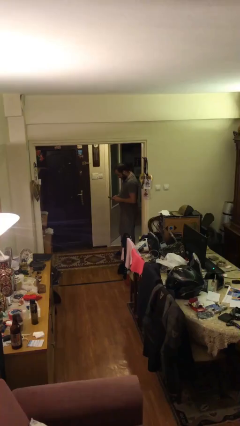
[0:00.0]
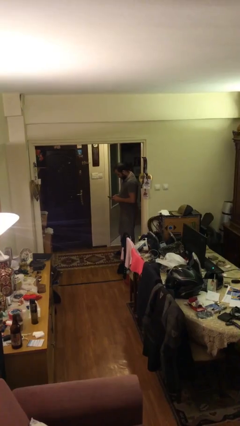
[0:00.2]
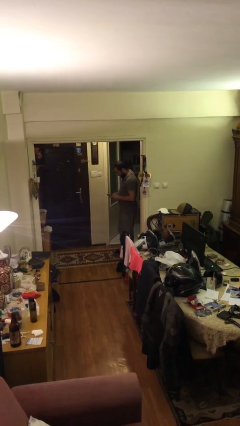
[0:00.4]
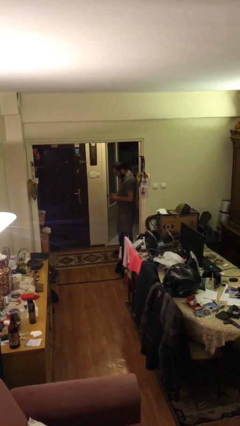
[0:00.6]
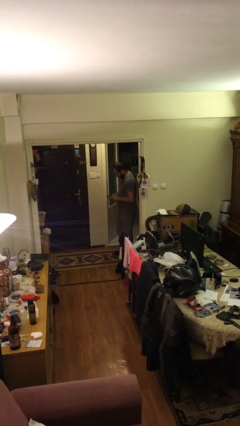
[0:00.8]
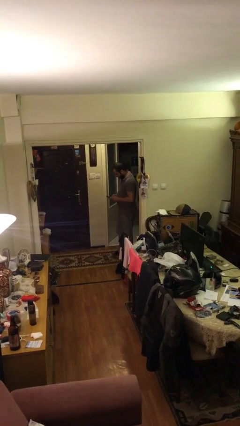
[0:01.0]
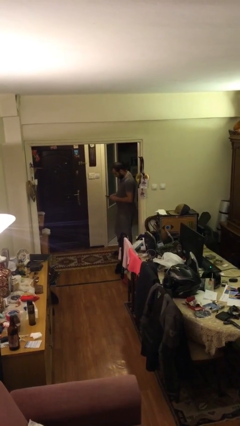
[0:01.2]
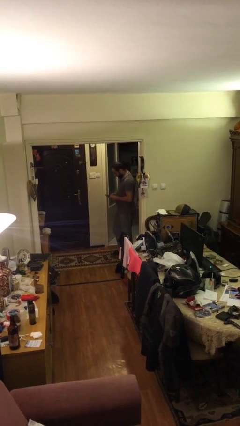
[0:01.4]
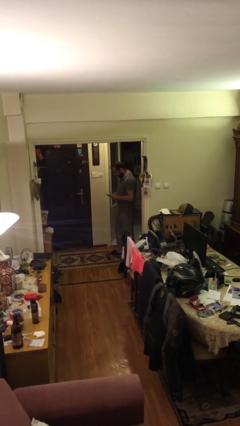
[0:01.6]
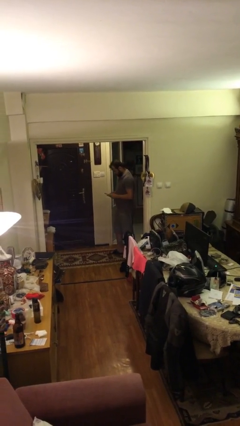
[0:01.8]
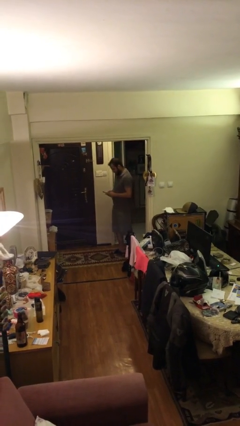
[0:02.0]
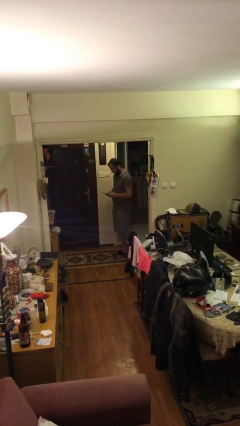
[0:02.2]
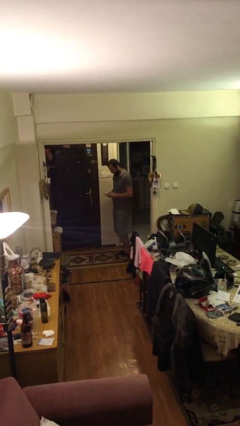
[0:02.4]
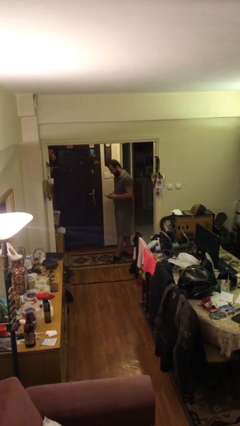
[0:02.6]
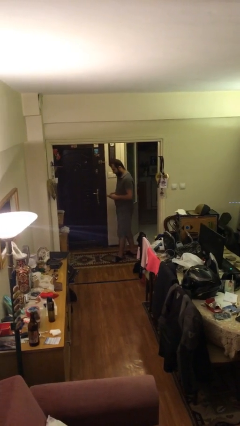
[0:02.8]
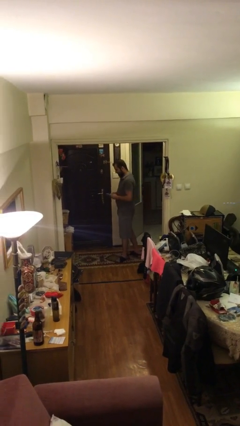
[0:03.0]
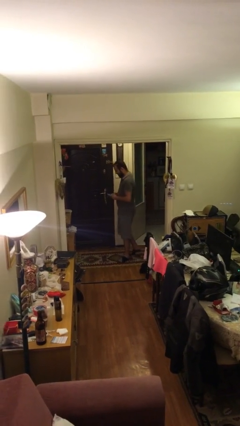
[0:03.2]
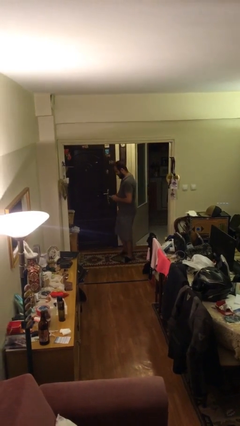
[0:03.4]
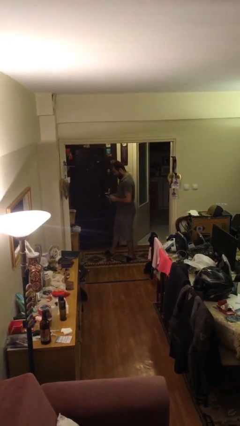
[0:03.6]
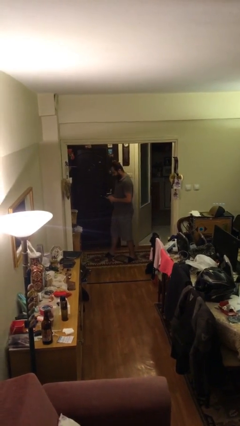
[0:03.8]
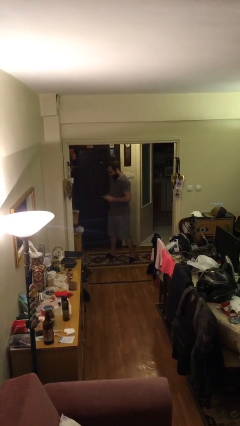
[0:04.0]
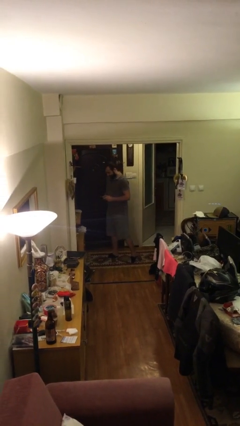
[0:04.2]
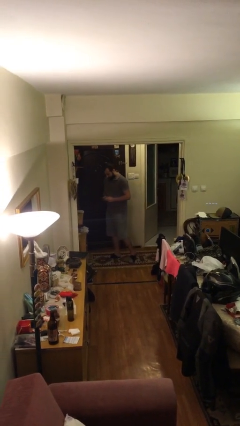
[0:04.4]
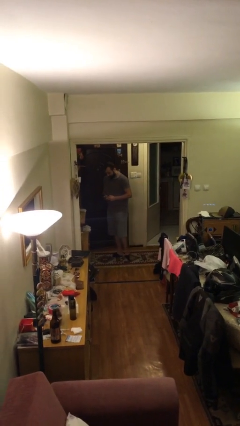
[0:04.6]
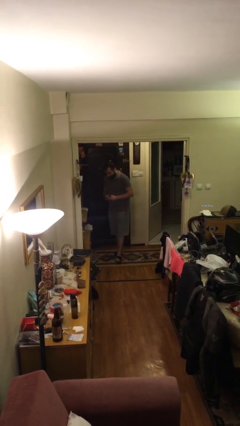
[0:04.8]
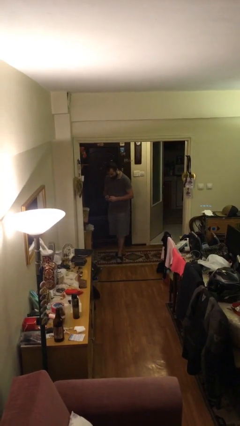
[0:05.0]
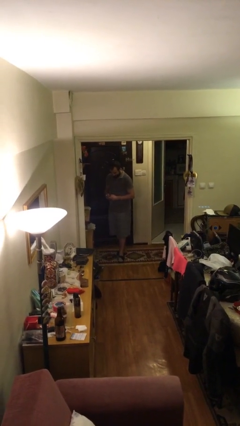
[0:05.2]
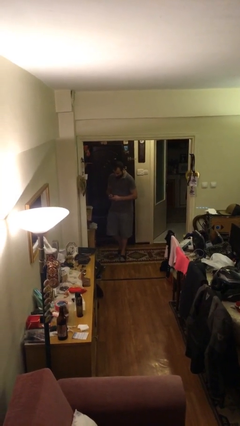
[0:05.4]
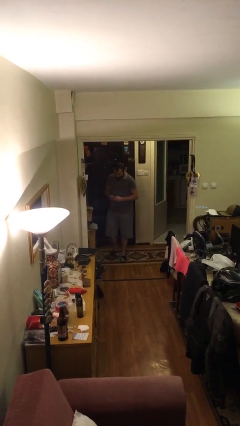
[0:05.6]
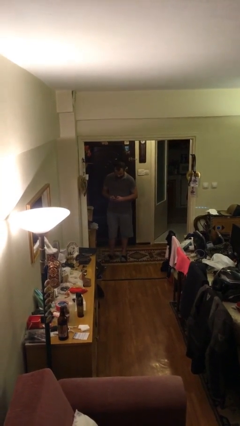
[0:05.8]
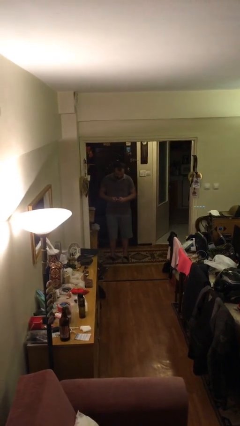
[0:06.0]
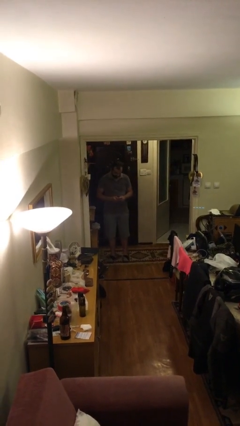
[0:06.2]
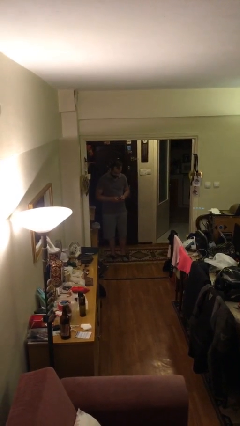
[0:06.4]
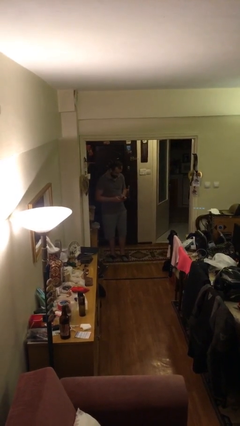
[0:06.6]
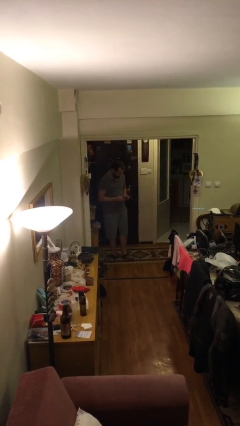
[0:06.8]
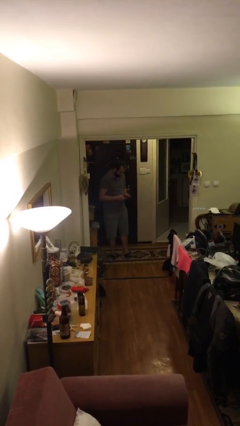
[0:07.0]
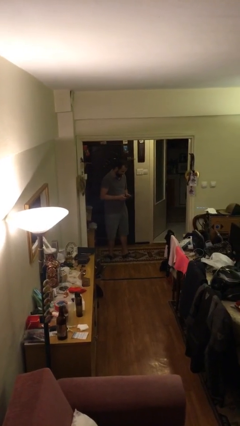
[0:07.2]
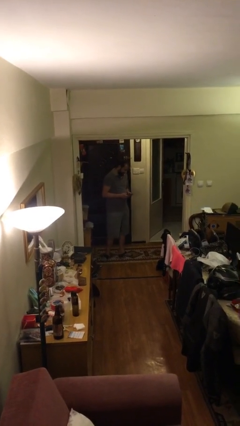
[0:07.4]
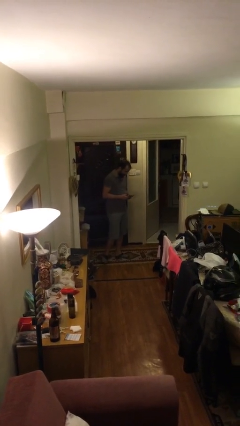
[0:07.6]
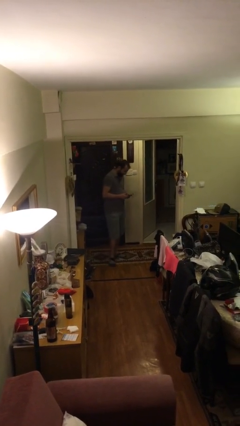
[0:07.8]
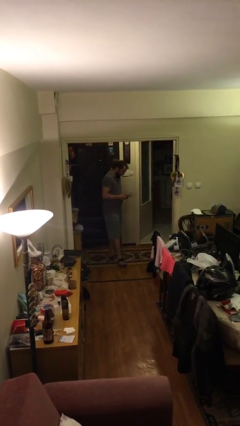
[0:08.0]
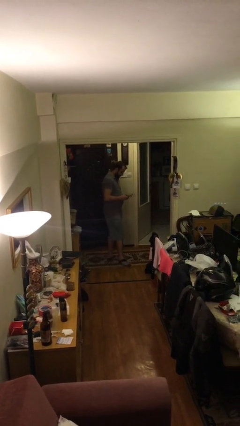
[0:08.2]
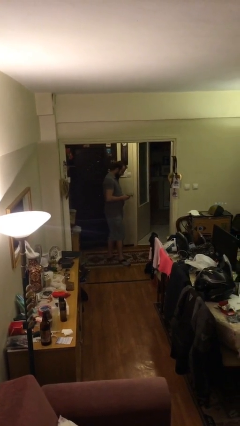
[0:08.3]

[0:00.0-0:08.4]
person texts on phone

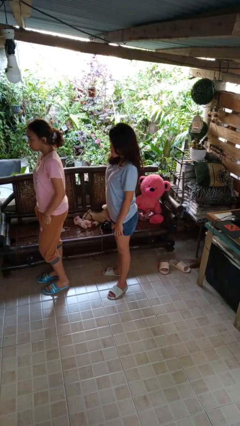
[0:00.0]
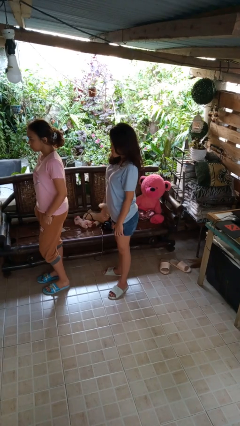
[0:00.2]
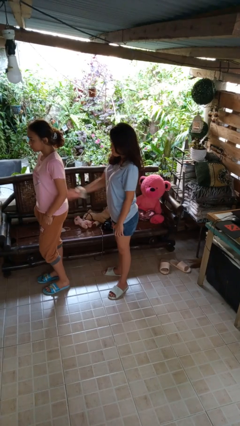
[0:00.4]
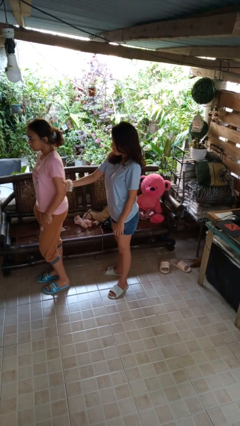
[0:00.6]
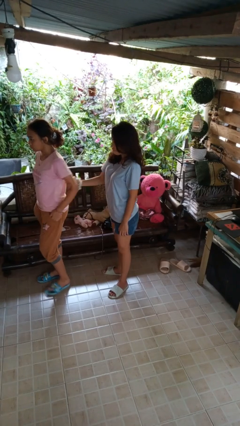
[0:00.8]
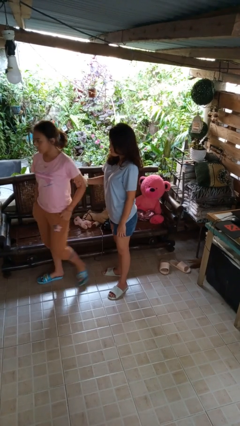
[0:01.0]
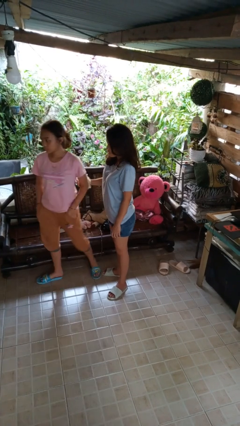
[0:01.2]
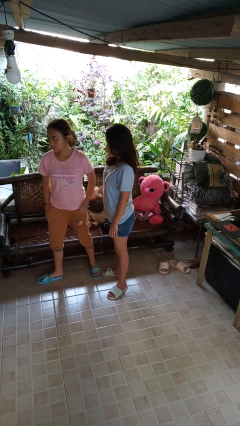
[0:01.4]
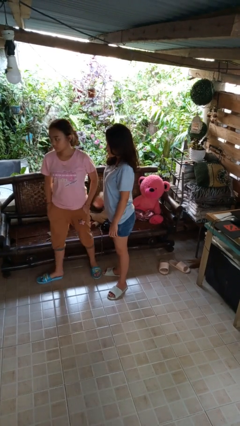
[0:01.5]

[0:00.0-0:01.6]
person grabs person by bicep

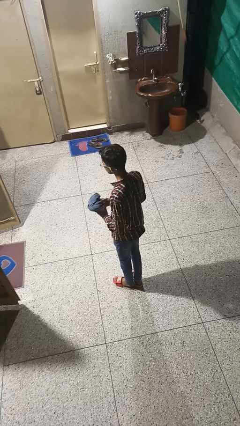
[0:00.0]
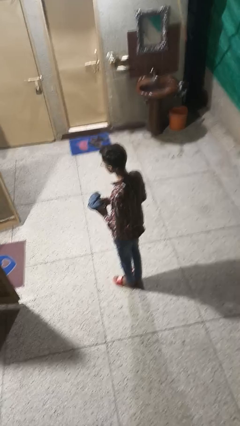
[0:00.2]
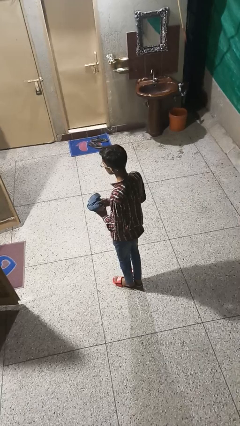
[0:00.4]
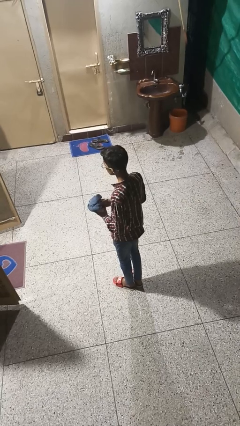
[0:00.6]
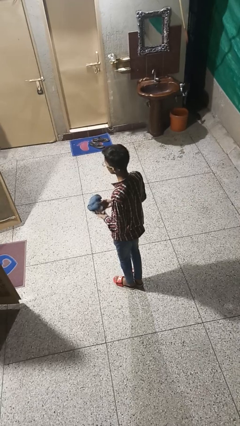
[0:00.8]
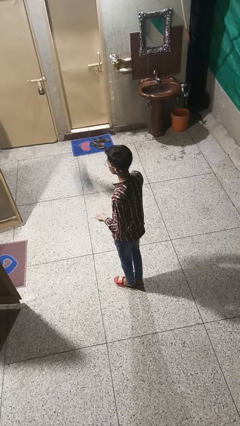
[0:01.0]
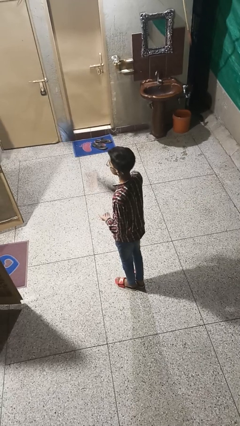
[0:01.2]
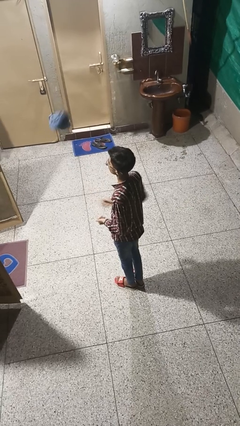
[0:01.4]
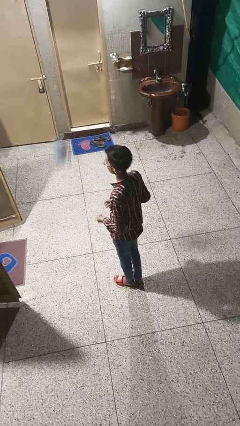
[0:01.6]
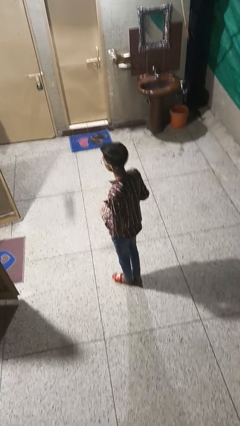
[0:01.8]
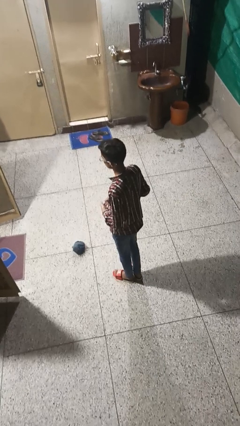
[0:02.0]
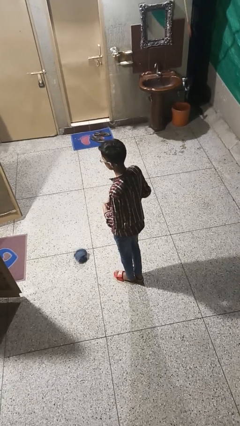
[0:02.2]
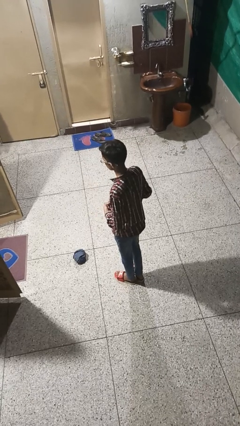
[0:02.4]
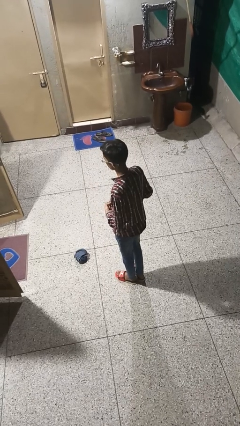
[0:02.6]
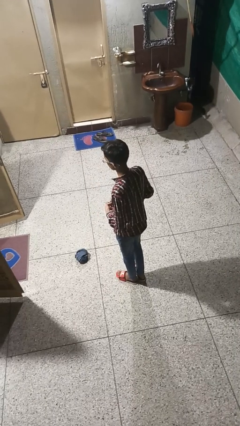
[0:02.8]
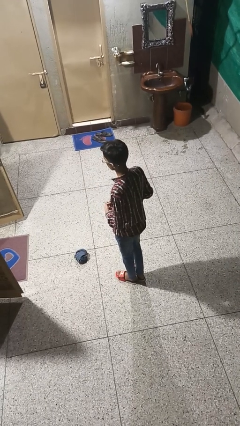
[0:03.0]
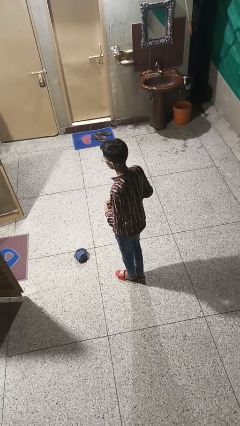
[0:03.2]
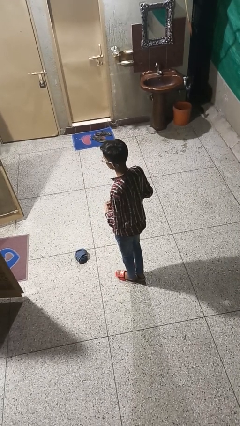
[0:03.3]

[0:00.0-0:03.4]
person throws object into air

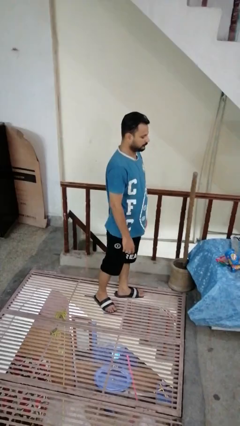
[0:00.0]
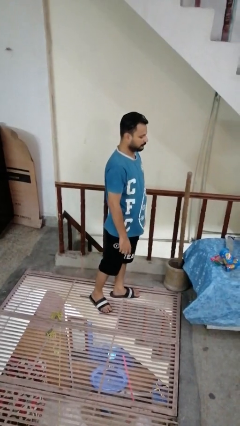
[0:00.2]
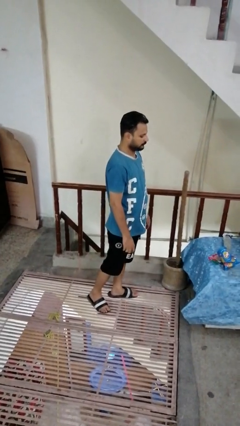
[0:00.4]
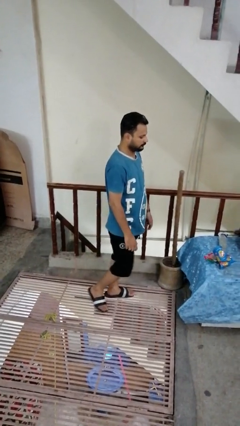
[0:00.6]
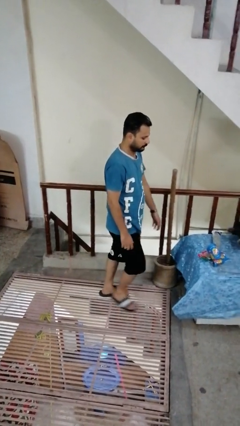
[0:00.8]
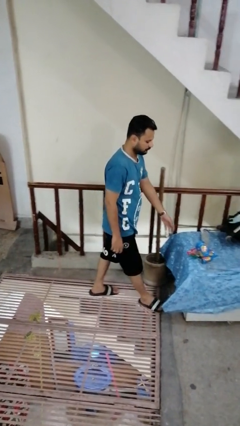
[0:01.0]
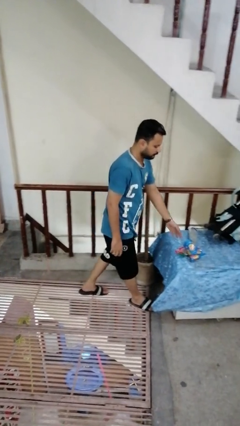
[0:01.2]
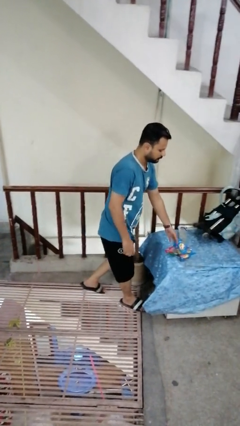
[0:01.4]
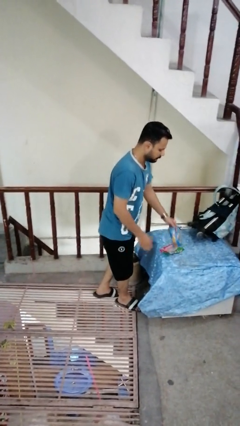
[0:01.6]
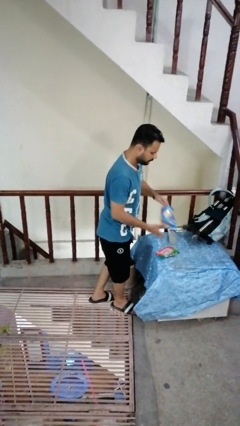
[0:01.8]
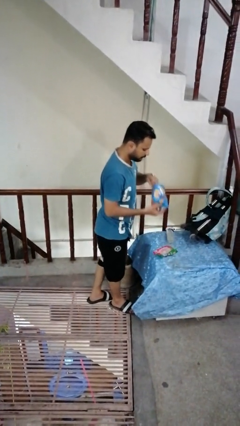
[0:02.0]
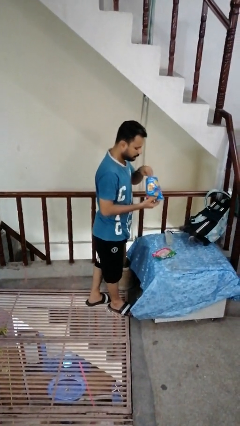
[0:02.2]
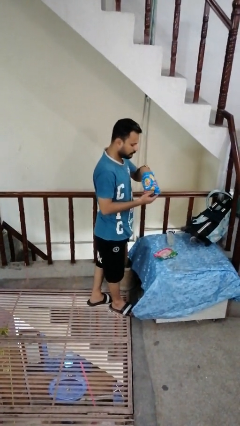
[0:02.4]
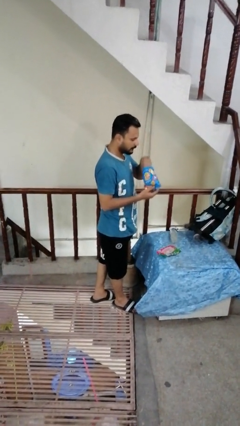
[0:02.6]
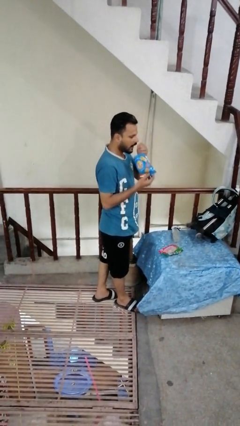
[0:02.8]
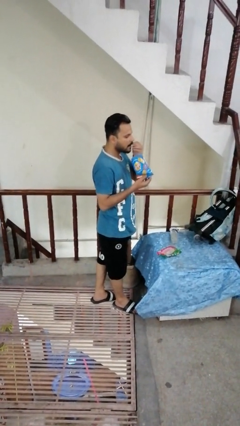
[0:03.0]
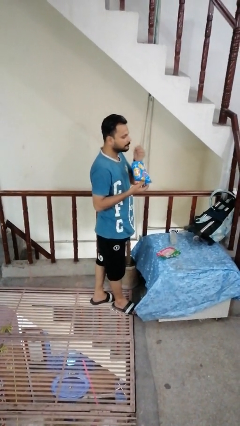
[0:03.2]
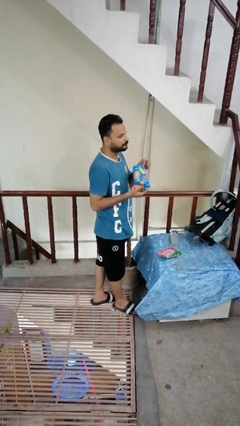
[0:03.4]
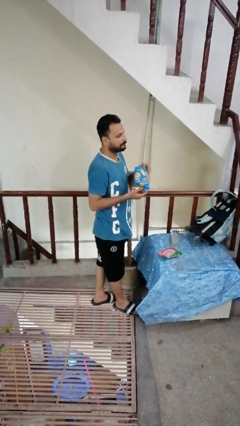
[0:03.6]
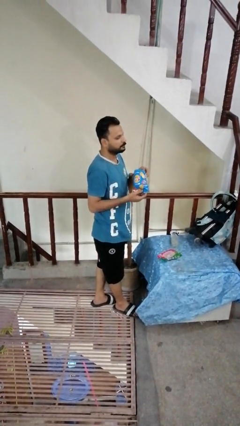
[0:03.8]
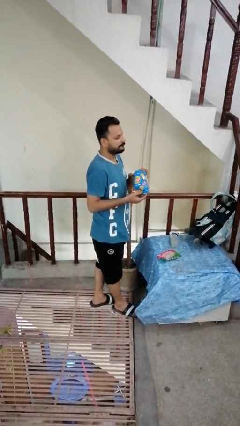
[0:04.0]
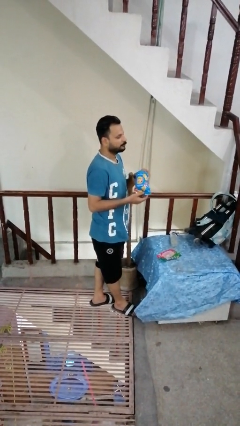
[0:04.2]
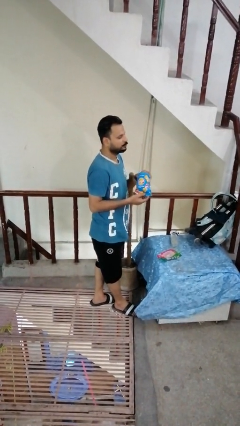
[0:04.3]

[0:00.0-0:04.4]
person eats snack from bag
